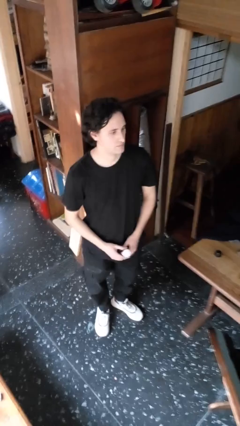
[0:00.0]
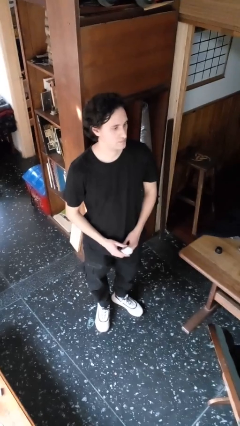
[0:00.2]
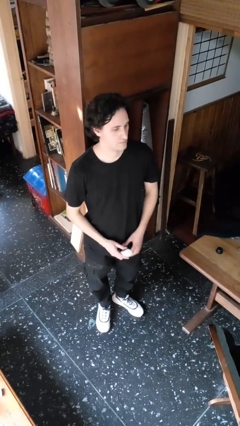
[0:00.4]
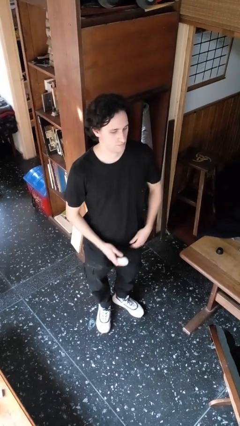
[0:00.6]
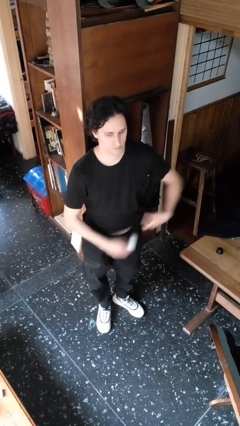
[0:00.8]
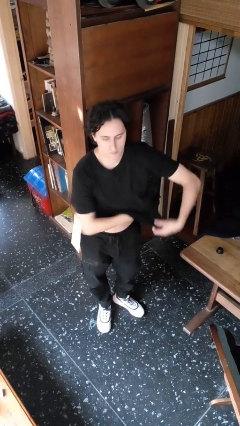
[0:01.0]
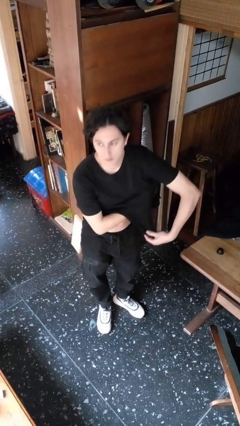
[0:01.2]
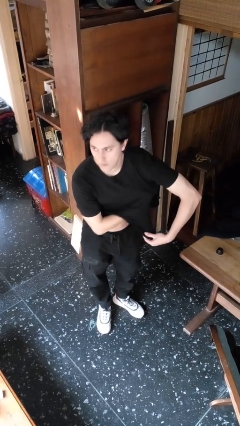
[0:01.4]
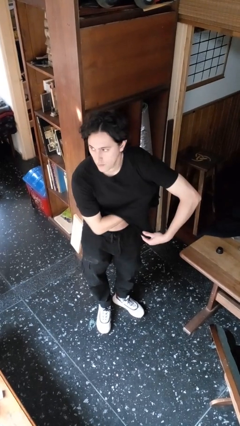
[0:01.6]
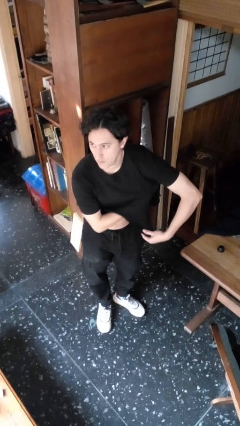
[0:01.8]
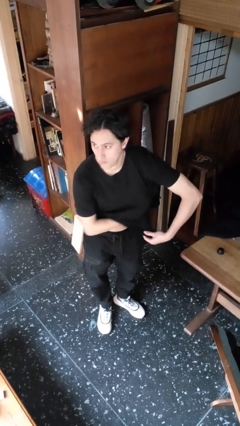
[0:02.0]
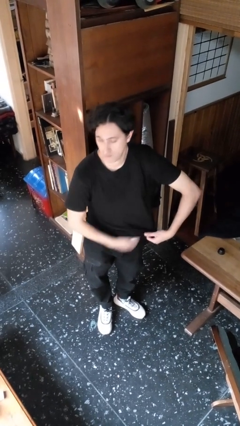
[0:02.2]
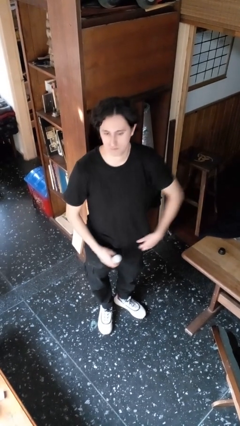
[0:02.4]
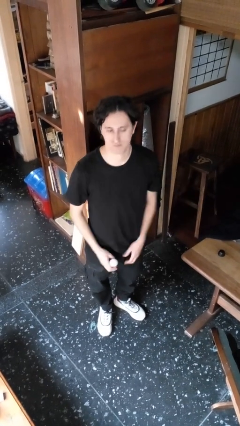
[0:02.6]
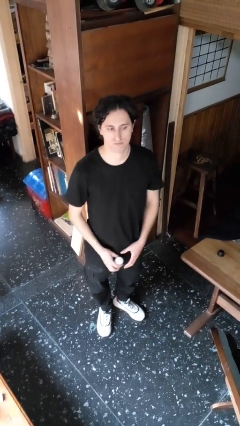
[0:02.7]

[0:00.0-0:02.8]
person applies deodorant

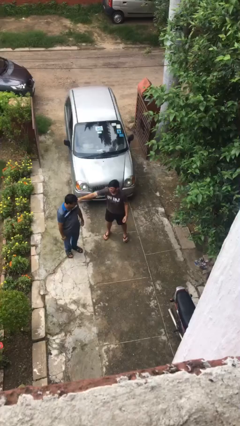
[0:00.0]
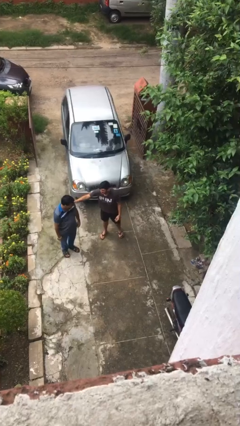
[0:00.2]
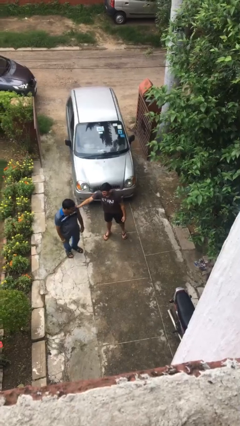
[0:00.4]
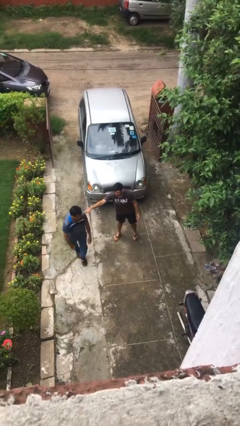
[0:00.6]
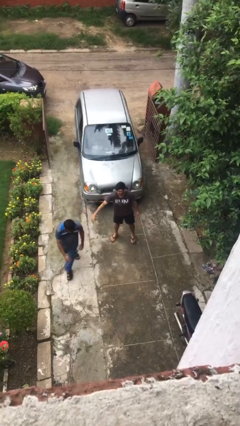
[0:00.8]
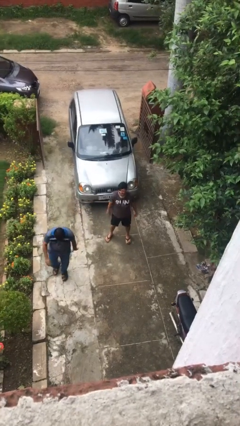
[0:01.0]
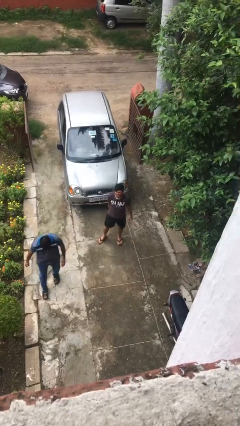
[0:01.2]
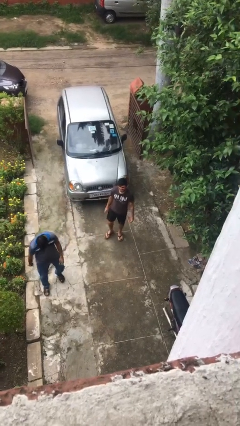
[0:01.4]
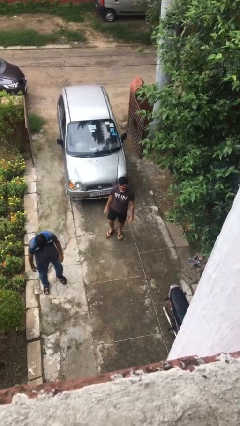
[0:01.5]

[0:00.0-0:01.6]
person shoves person

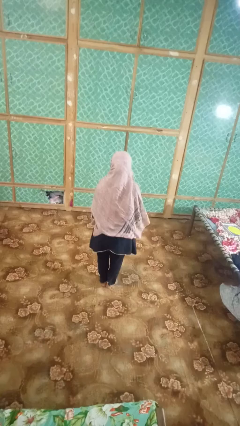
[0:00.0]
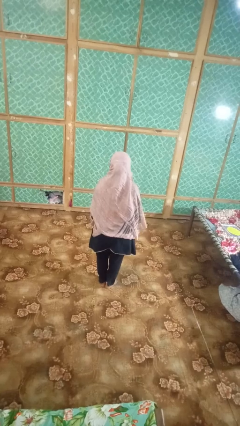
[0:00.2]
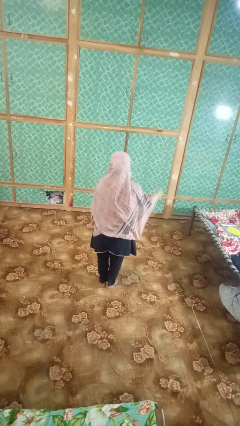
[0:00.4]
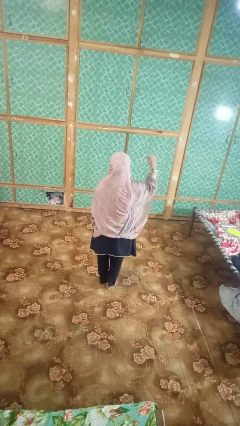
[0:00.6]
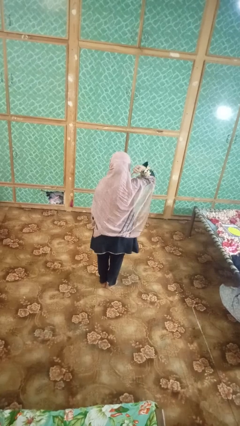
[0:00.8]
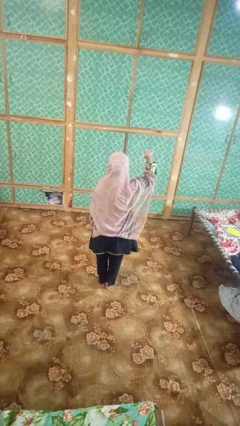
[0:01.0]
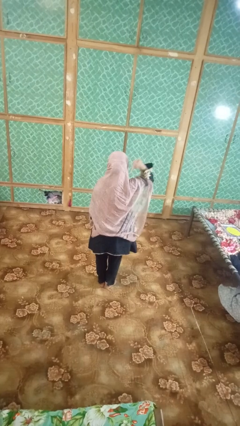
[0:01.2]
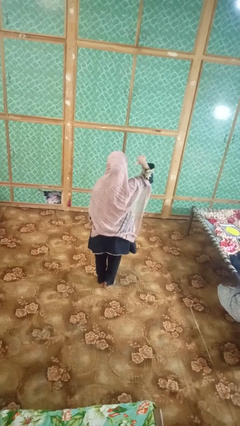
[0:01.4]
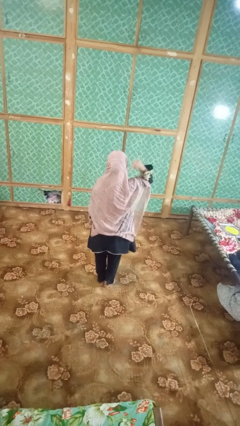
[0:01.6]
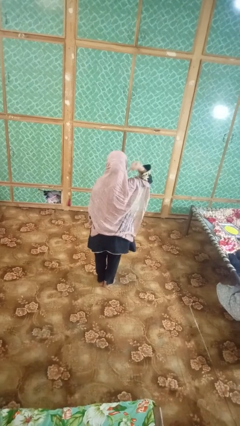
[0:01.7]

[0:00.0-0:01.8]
person gestures behind me

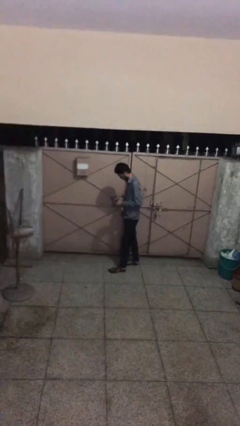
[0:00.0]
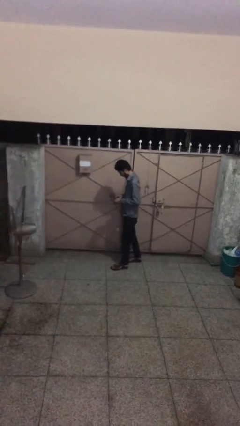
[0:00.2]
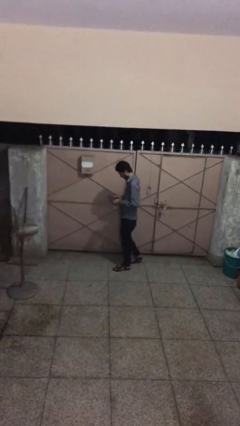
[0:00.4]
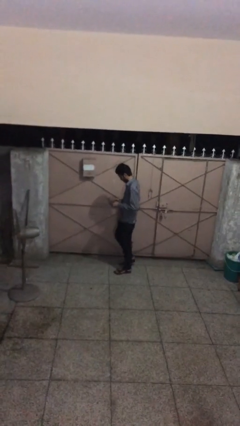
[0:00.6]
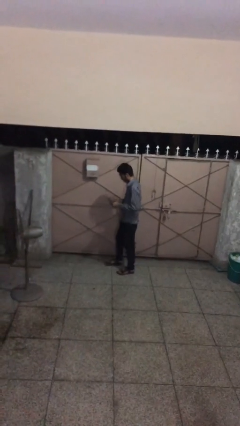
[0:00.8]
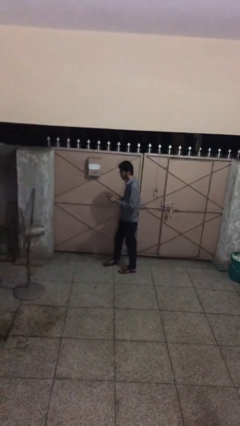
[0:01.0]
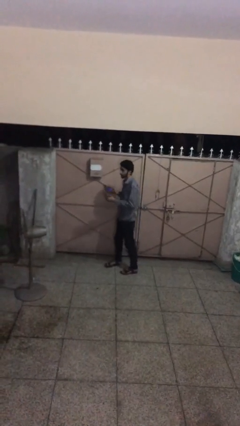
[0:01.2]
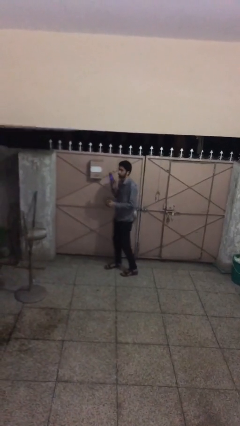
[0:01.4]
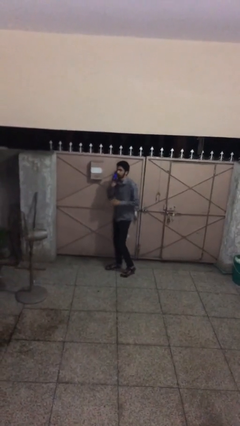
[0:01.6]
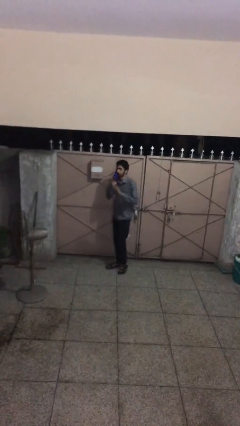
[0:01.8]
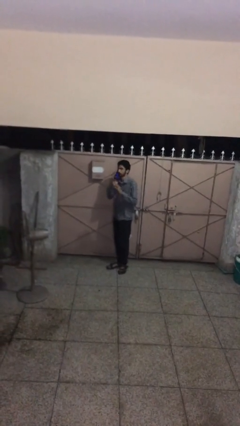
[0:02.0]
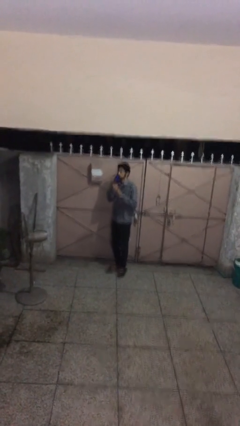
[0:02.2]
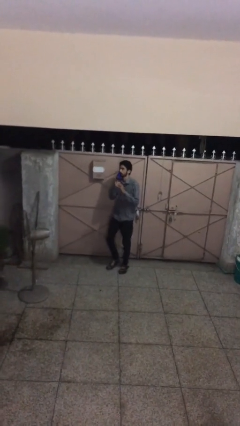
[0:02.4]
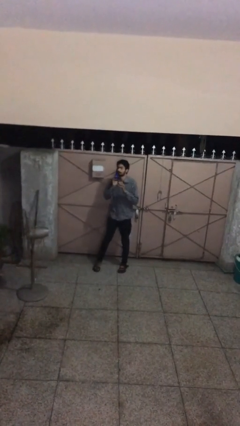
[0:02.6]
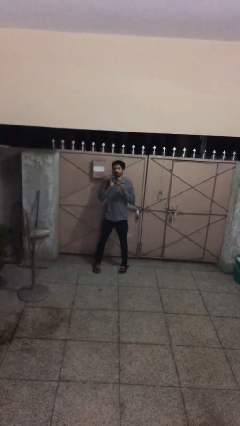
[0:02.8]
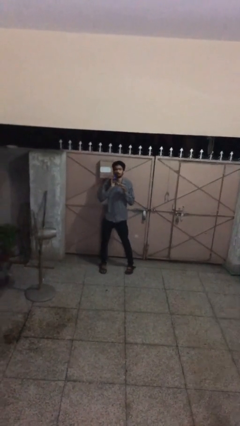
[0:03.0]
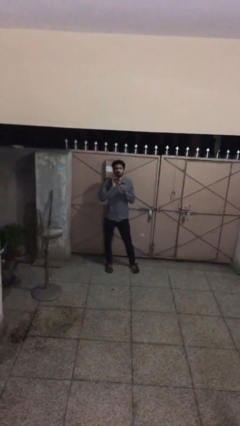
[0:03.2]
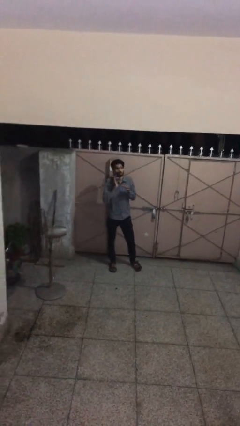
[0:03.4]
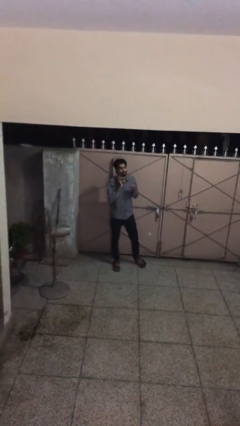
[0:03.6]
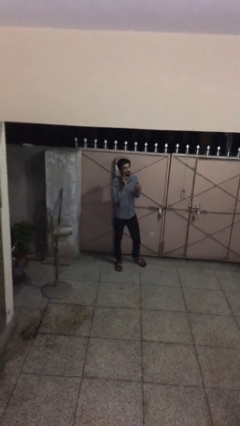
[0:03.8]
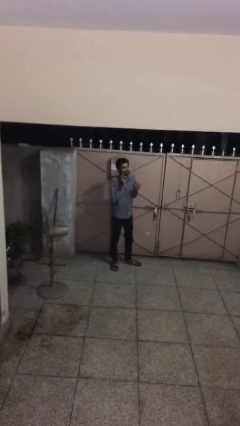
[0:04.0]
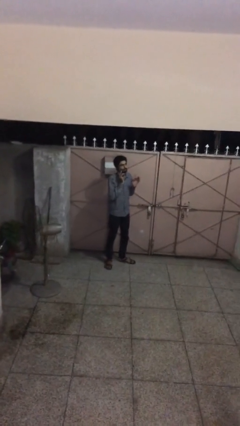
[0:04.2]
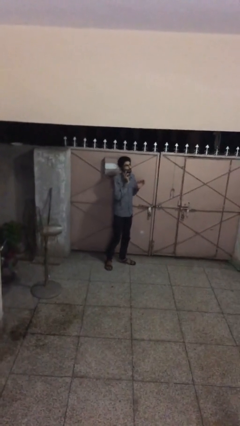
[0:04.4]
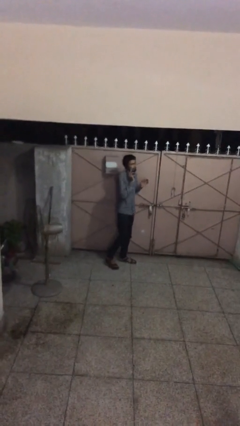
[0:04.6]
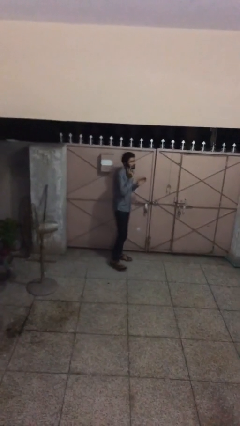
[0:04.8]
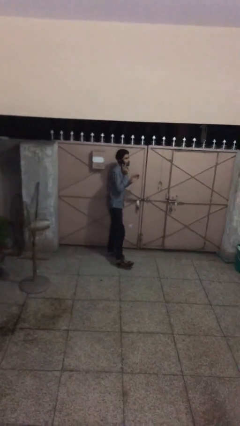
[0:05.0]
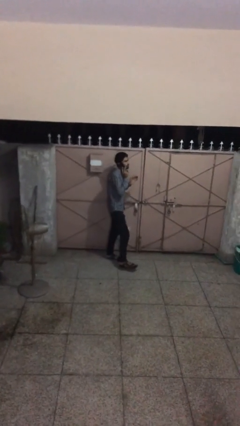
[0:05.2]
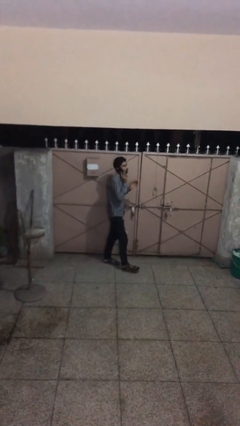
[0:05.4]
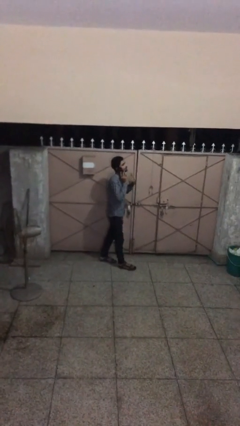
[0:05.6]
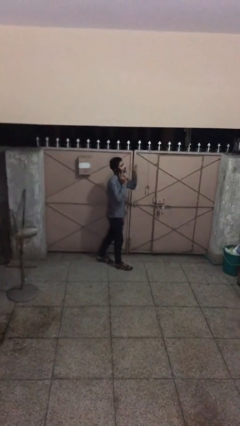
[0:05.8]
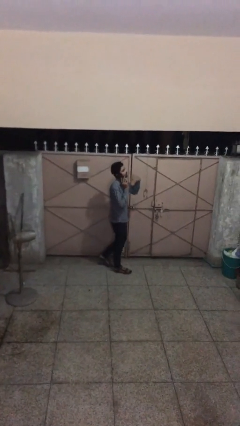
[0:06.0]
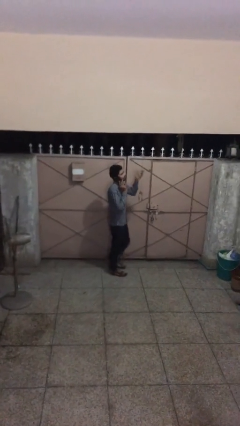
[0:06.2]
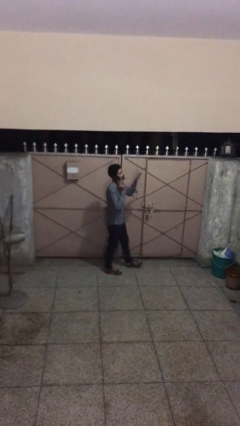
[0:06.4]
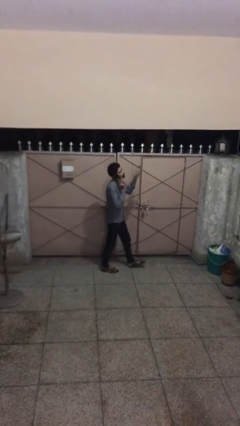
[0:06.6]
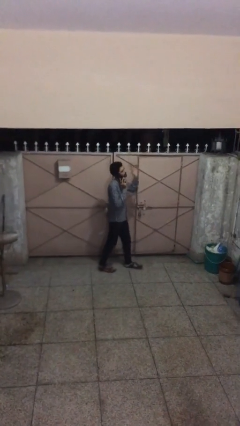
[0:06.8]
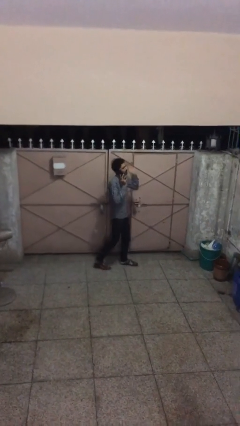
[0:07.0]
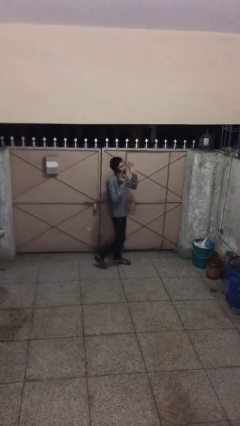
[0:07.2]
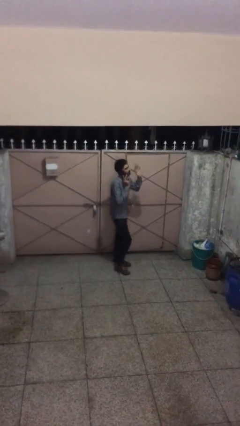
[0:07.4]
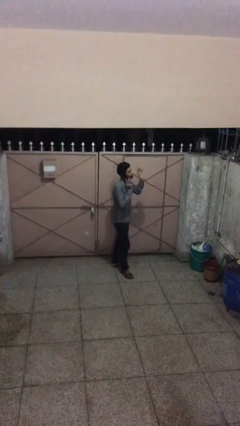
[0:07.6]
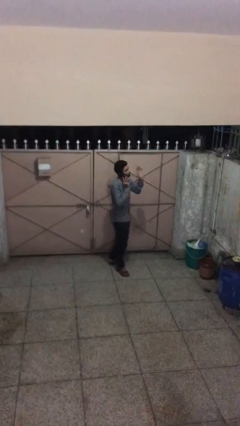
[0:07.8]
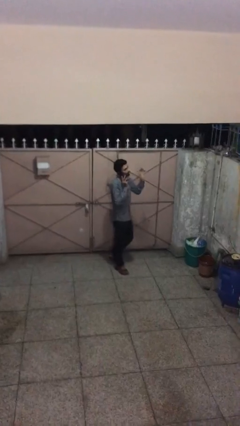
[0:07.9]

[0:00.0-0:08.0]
person talks on phone

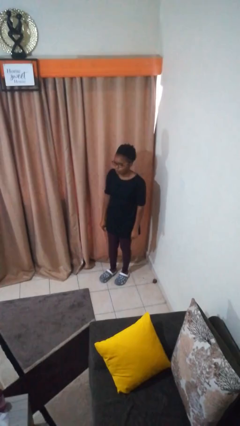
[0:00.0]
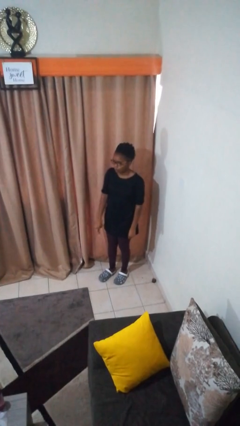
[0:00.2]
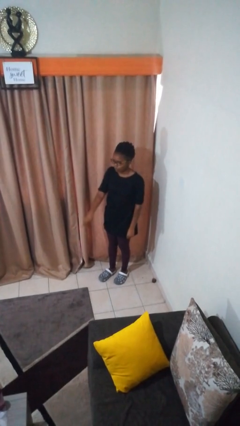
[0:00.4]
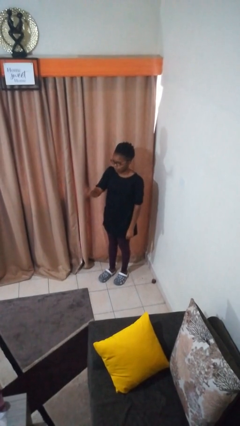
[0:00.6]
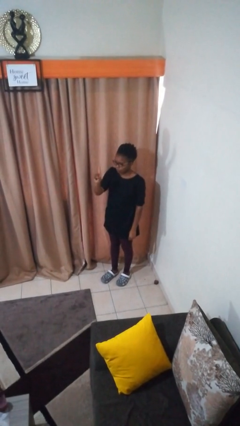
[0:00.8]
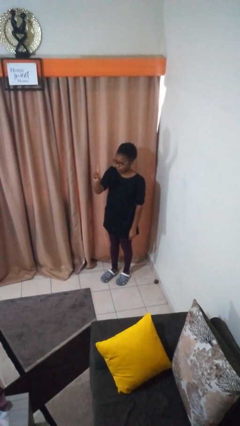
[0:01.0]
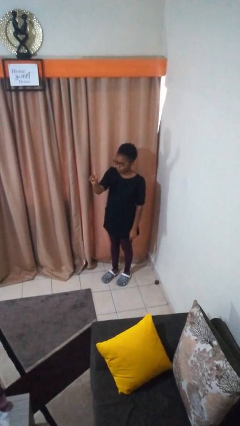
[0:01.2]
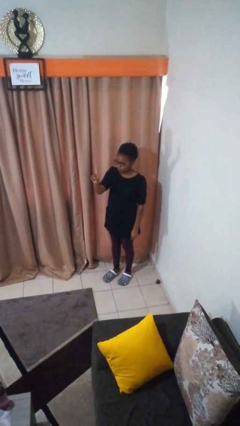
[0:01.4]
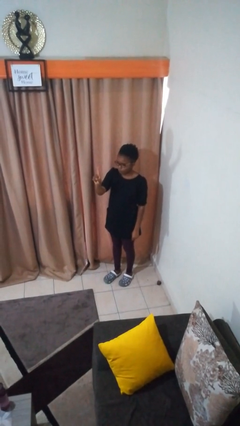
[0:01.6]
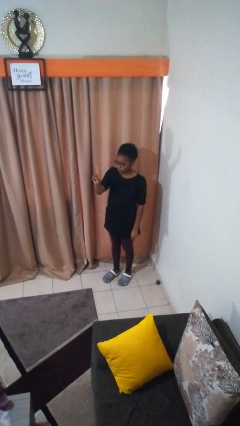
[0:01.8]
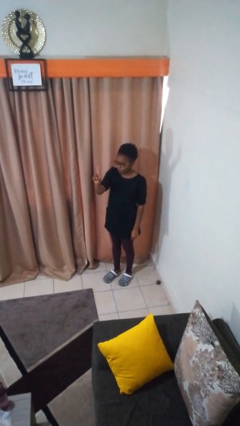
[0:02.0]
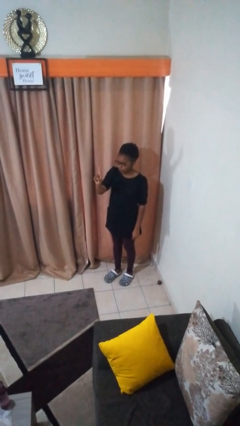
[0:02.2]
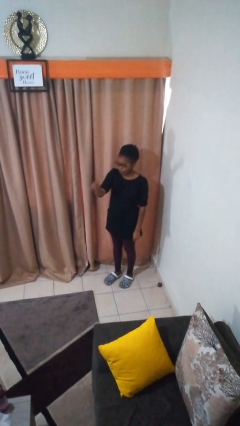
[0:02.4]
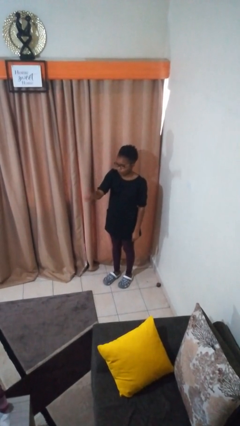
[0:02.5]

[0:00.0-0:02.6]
person gestures number one

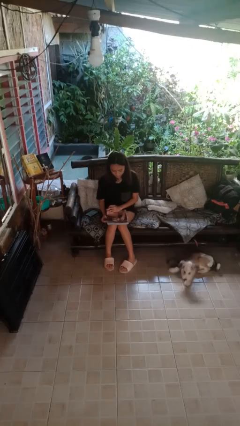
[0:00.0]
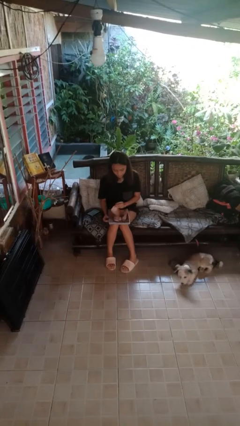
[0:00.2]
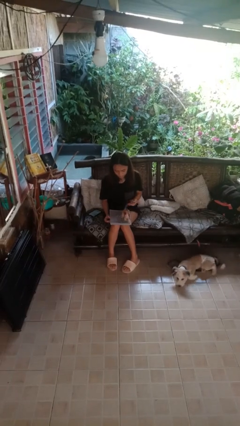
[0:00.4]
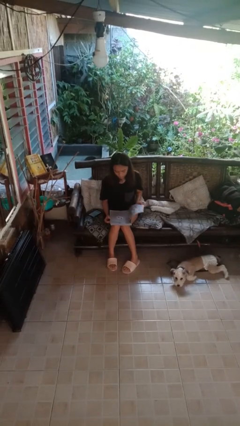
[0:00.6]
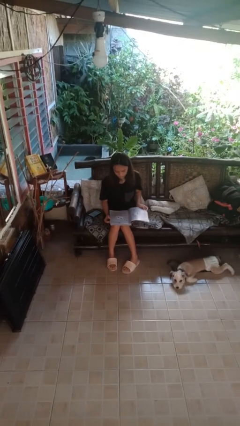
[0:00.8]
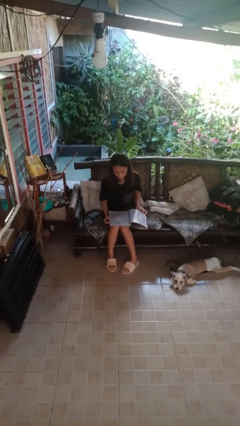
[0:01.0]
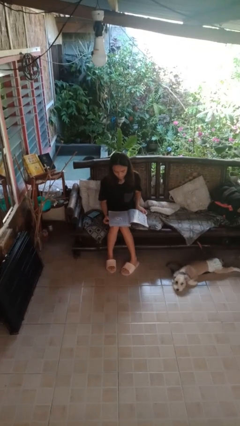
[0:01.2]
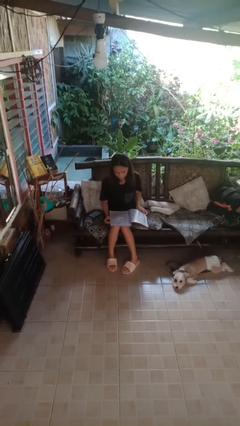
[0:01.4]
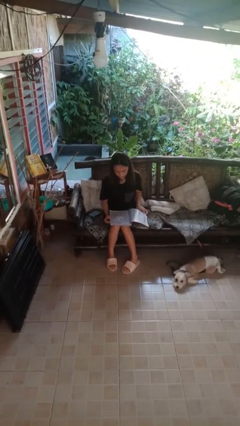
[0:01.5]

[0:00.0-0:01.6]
person reads magazine
